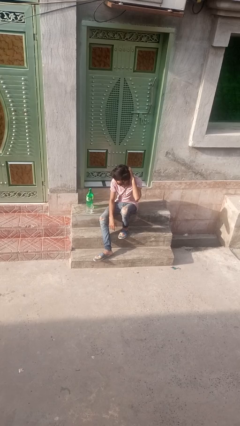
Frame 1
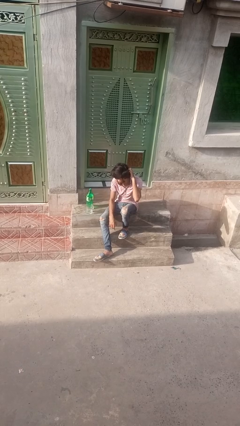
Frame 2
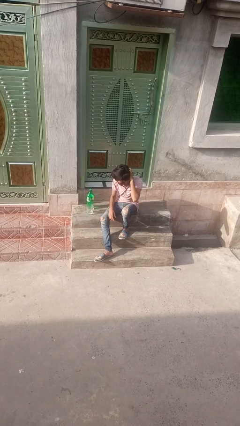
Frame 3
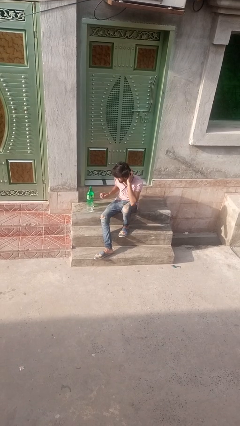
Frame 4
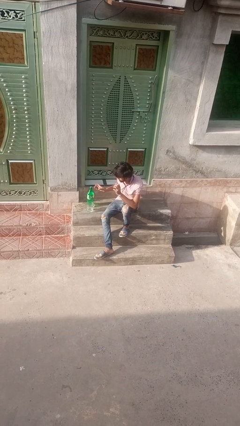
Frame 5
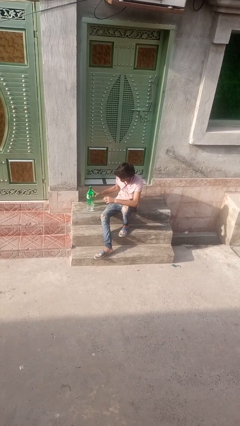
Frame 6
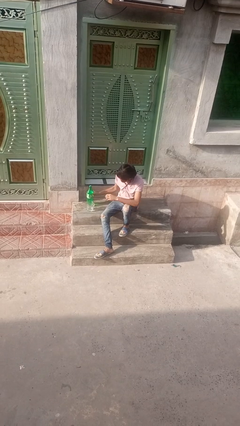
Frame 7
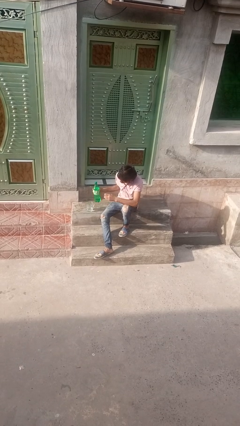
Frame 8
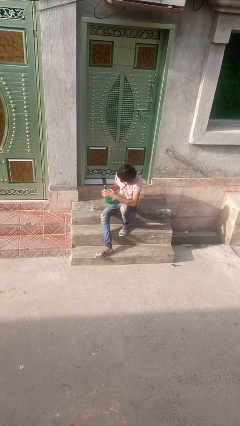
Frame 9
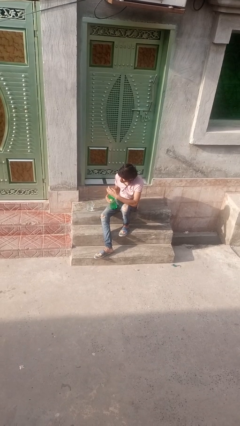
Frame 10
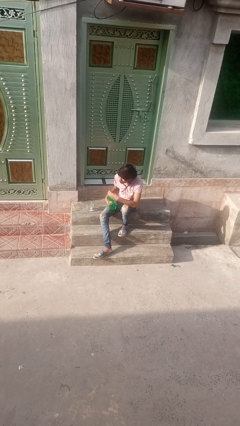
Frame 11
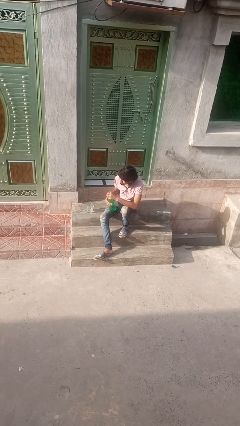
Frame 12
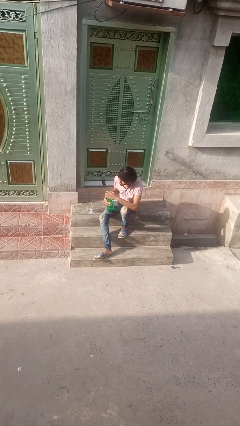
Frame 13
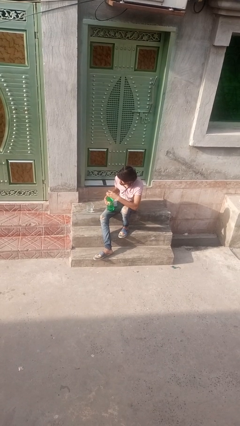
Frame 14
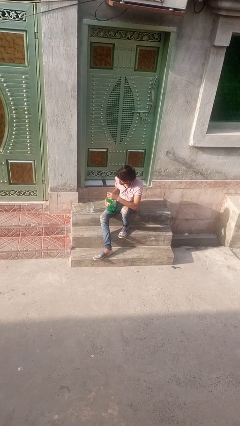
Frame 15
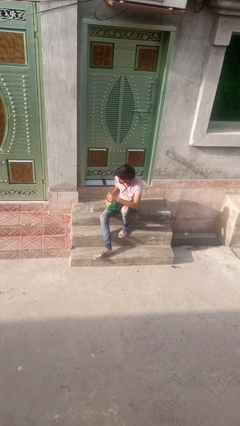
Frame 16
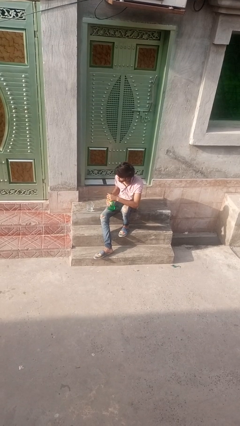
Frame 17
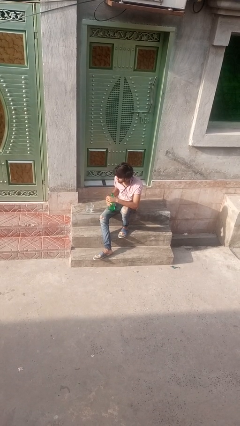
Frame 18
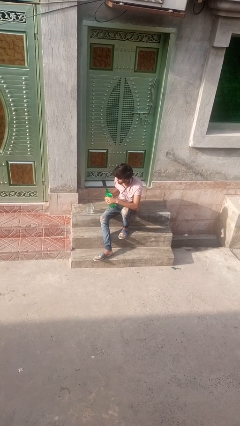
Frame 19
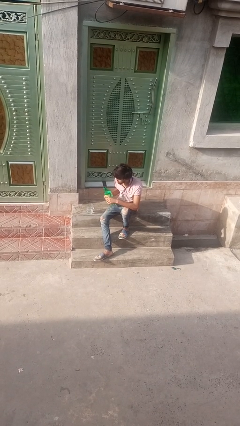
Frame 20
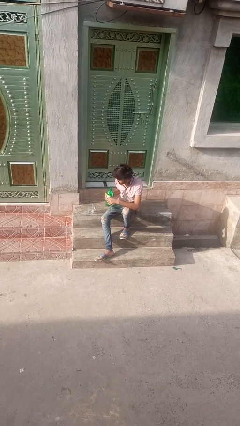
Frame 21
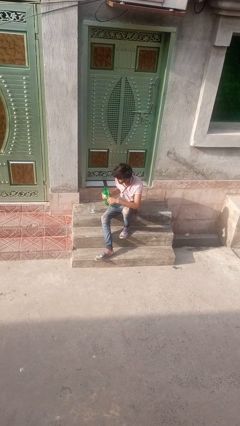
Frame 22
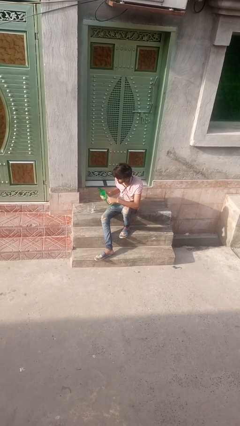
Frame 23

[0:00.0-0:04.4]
person unscrews lid from bottle

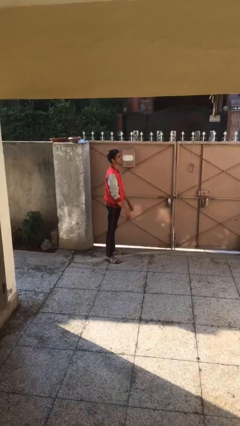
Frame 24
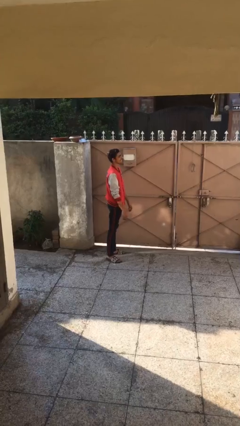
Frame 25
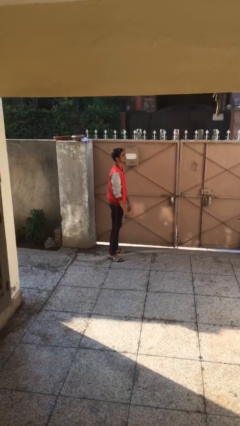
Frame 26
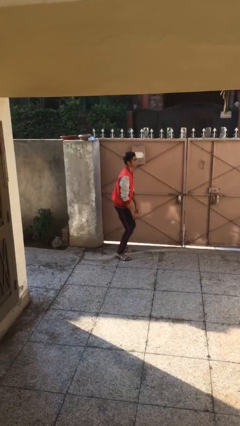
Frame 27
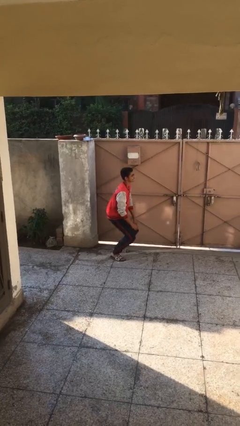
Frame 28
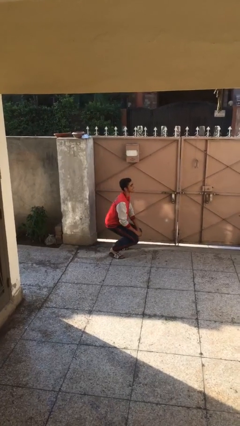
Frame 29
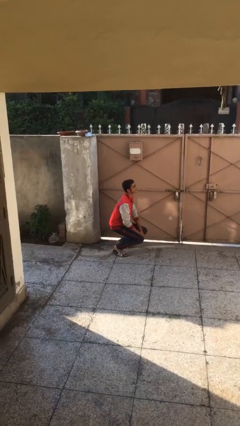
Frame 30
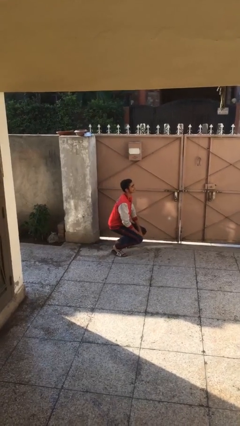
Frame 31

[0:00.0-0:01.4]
person sits down

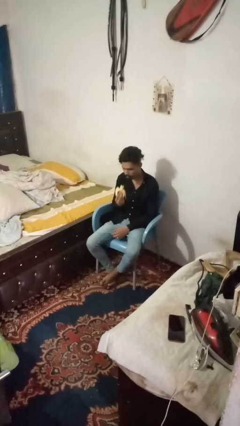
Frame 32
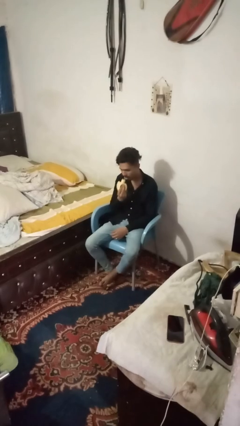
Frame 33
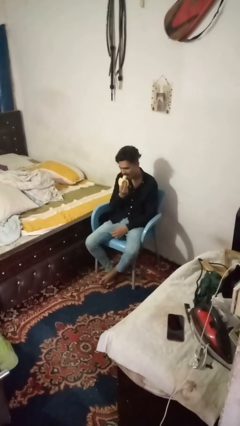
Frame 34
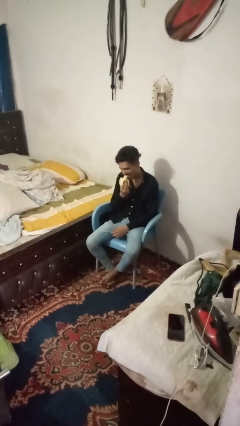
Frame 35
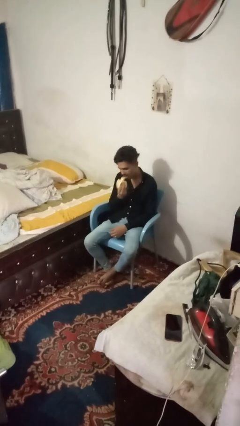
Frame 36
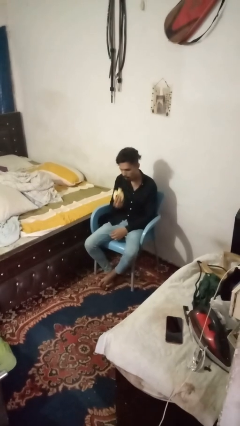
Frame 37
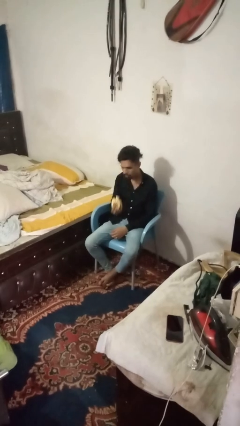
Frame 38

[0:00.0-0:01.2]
person eats banana

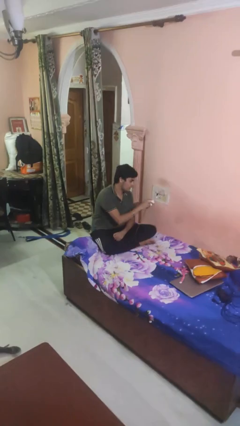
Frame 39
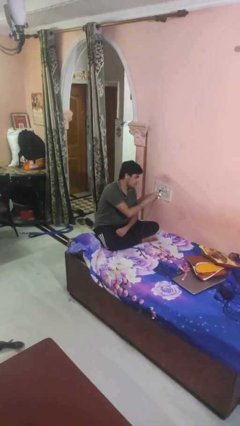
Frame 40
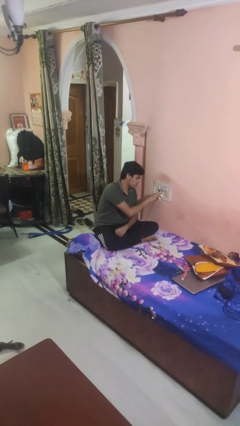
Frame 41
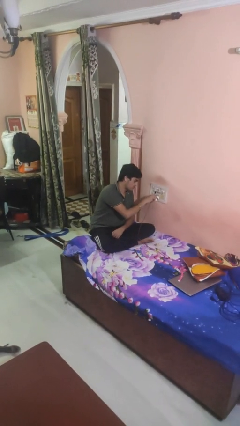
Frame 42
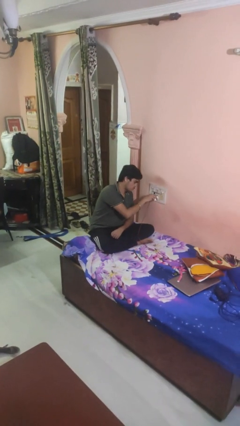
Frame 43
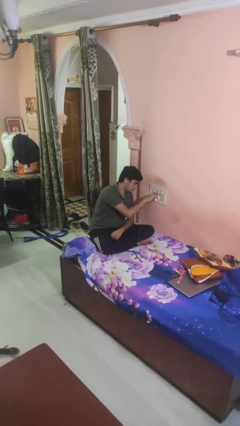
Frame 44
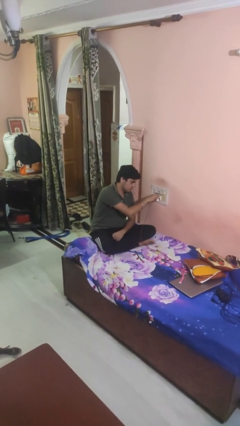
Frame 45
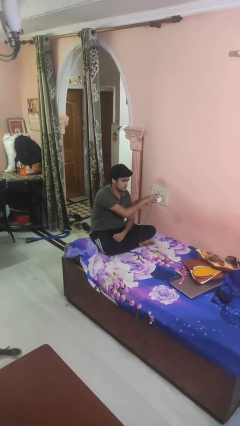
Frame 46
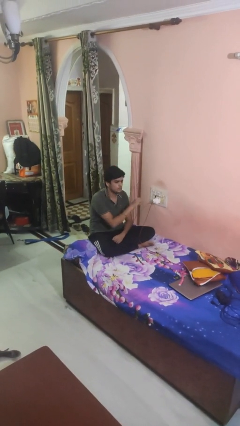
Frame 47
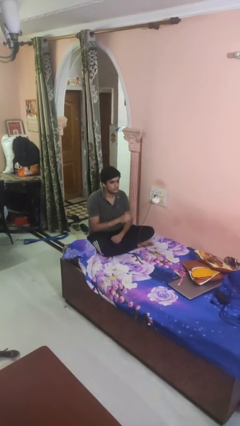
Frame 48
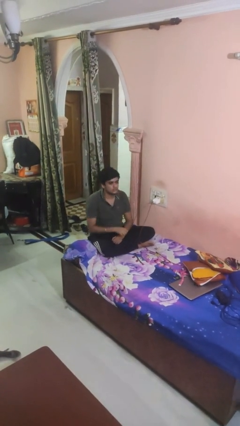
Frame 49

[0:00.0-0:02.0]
person plugs into electrical socket

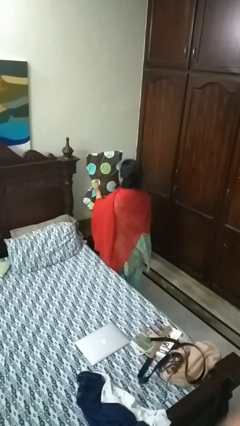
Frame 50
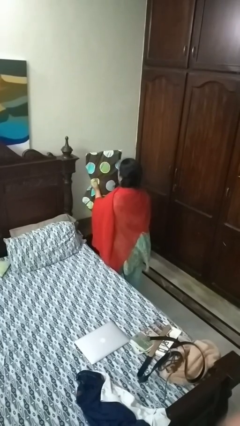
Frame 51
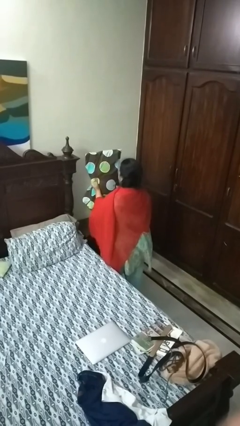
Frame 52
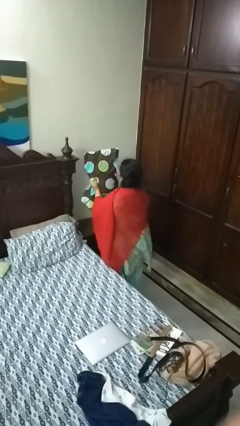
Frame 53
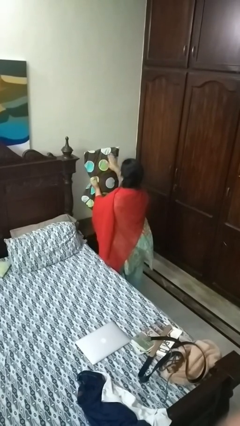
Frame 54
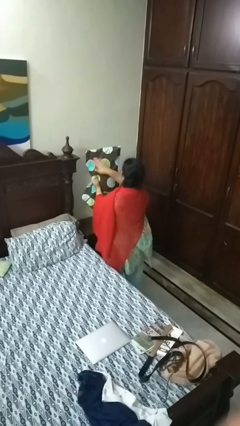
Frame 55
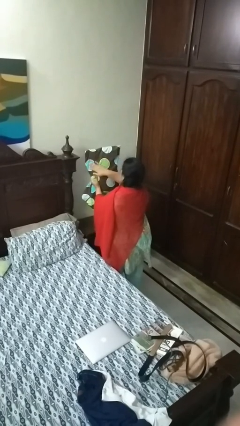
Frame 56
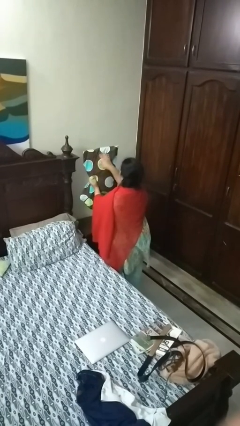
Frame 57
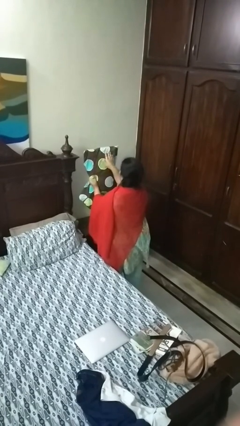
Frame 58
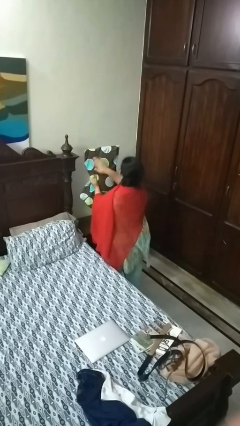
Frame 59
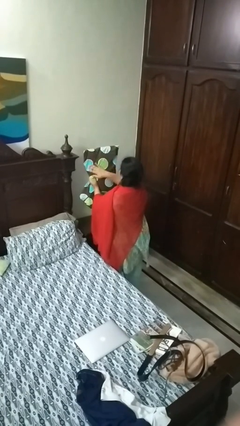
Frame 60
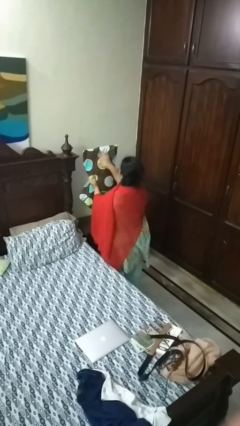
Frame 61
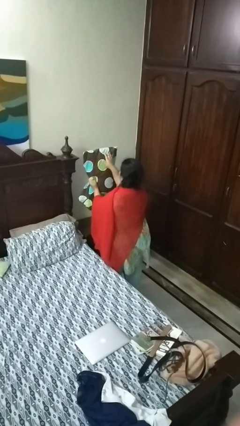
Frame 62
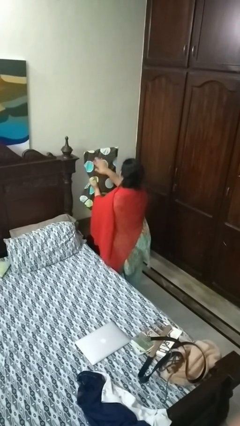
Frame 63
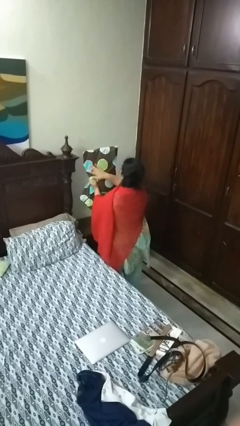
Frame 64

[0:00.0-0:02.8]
person waves hand over object

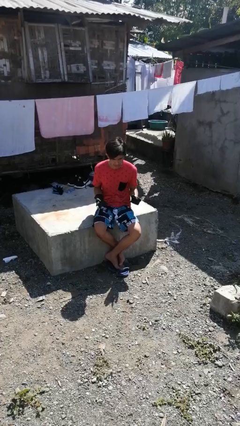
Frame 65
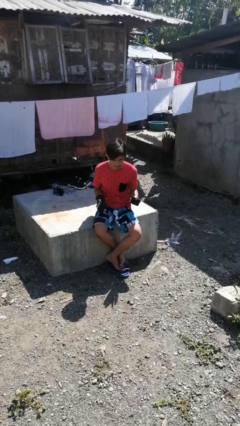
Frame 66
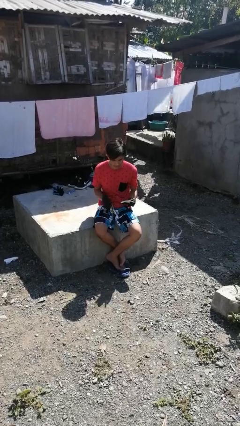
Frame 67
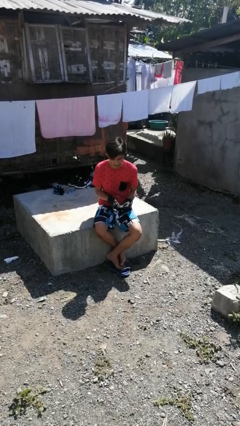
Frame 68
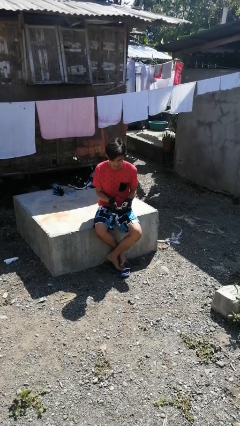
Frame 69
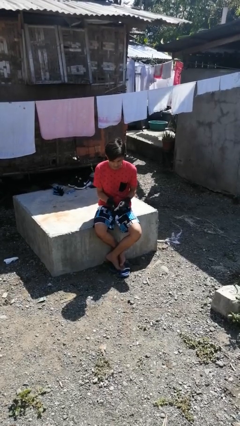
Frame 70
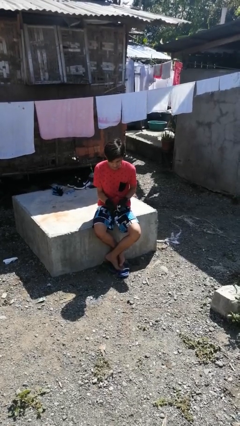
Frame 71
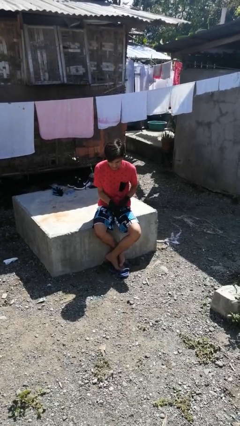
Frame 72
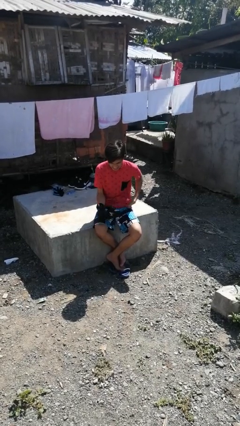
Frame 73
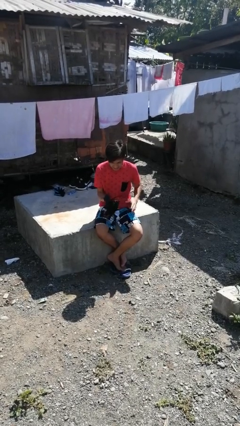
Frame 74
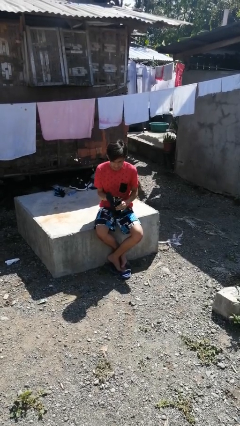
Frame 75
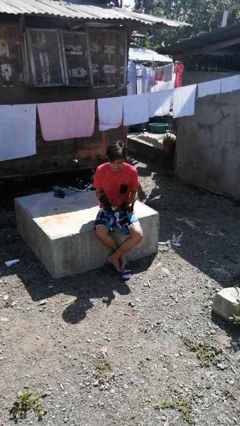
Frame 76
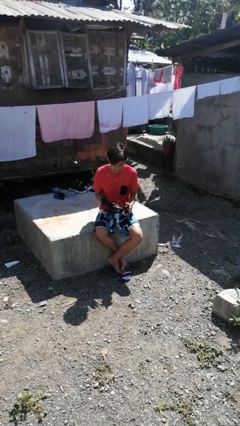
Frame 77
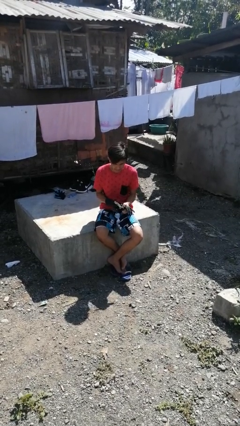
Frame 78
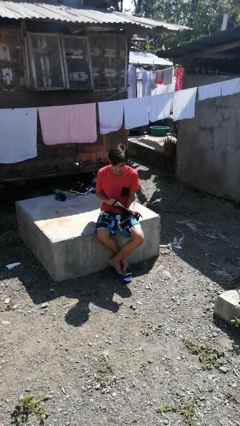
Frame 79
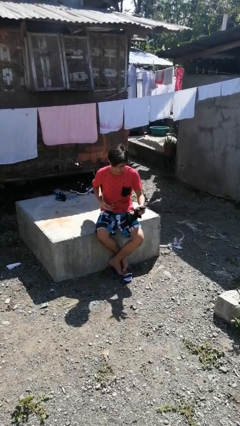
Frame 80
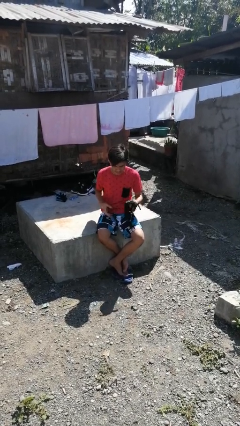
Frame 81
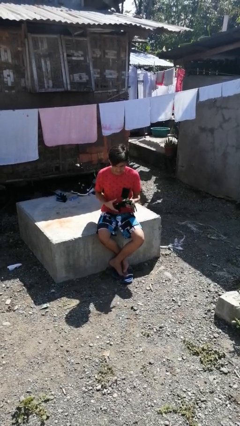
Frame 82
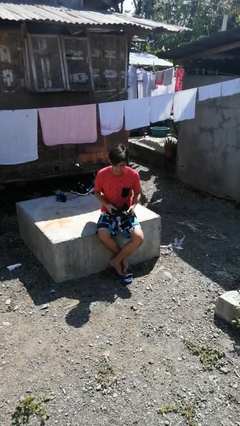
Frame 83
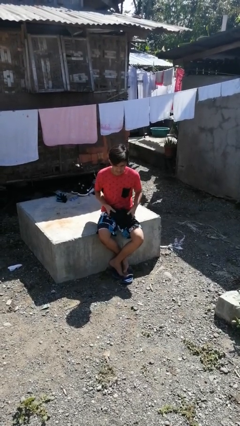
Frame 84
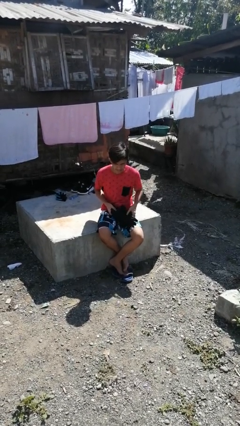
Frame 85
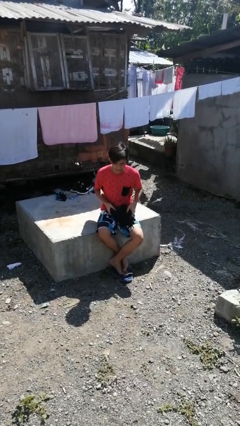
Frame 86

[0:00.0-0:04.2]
person takes off gloves

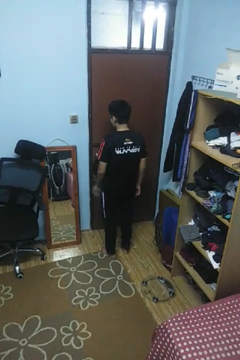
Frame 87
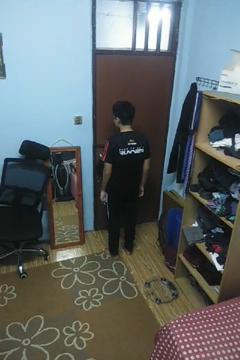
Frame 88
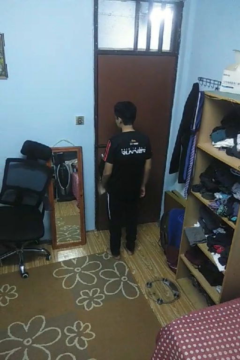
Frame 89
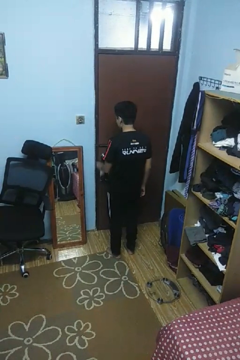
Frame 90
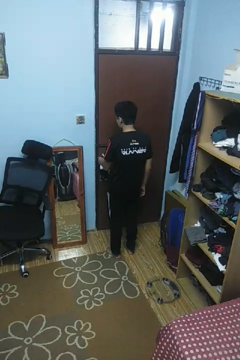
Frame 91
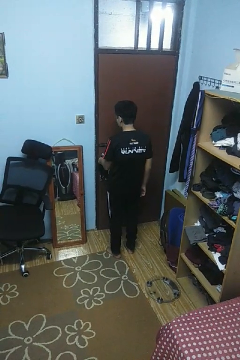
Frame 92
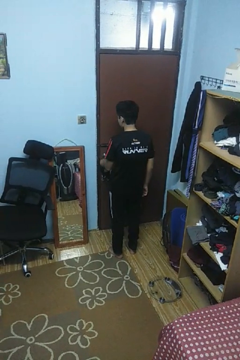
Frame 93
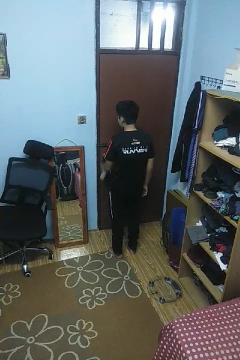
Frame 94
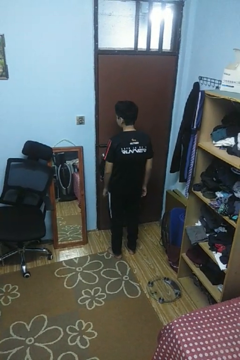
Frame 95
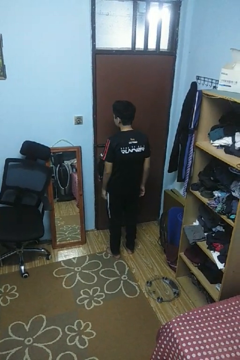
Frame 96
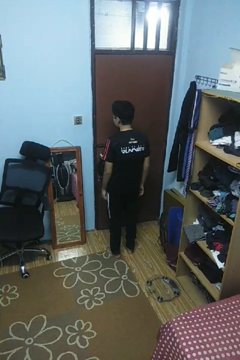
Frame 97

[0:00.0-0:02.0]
person locks door with keys
